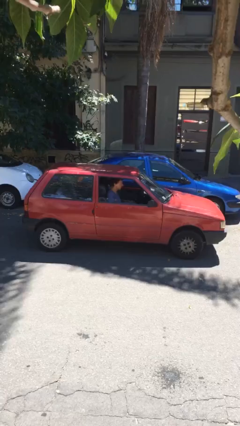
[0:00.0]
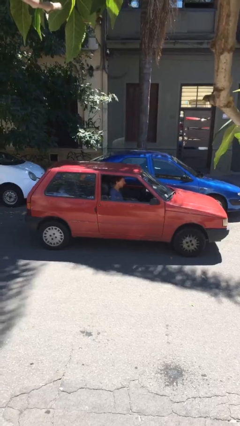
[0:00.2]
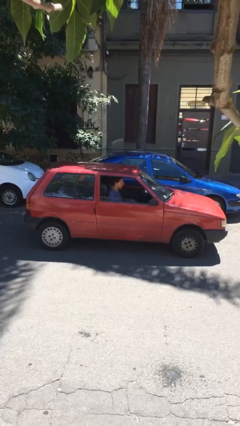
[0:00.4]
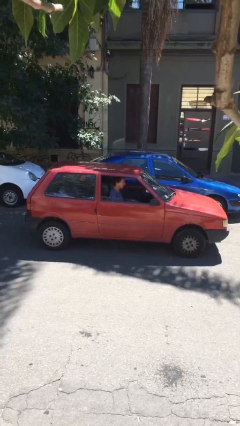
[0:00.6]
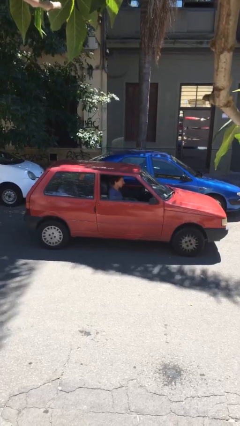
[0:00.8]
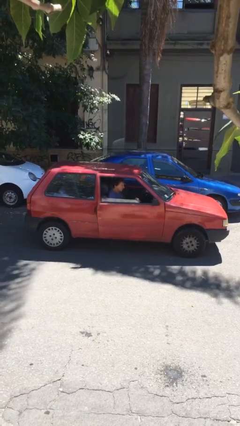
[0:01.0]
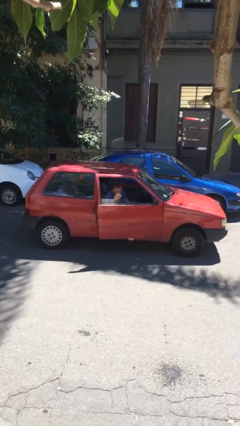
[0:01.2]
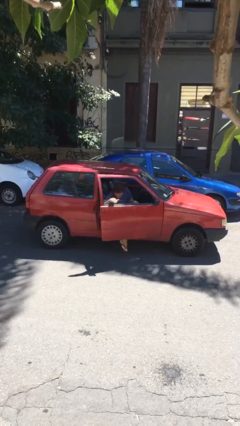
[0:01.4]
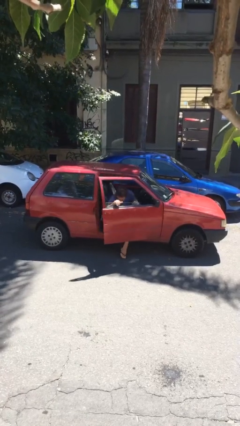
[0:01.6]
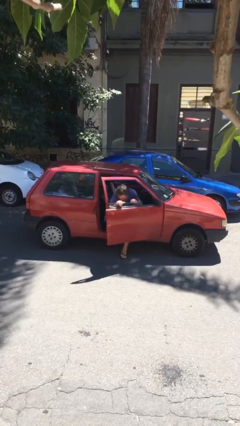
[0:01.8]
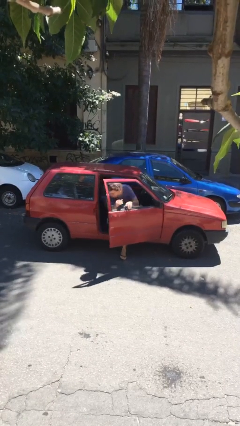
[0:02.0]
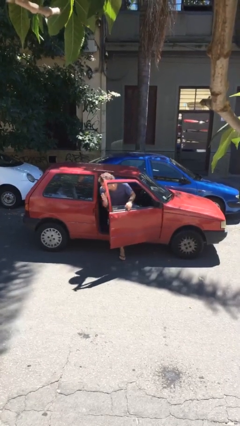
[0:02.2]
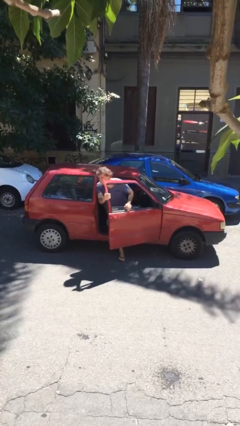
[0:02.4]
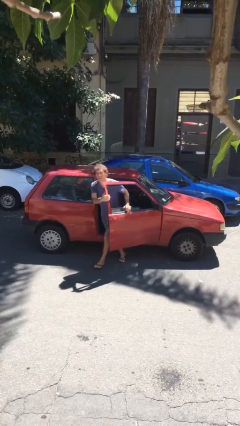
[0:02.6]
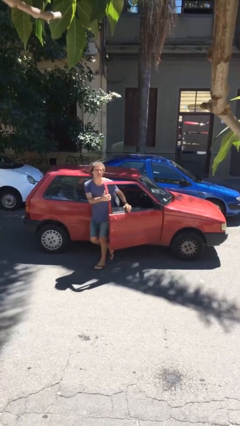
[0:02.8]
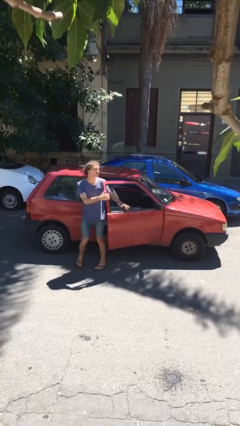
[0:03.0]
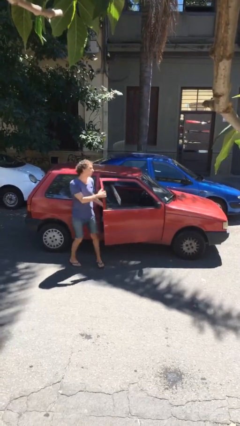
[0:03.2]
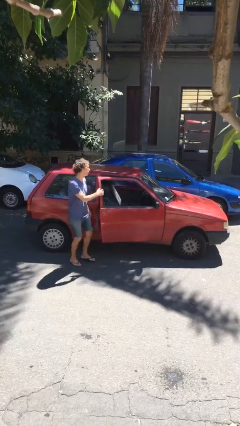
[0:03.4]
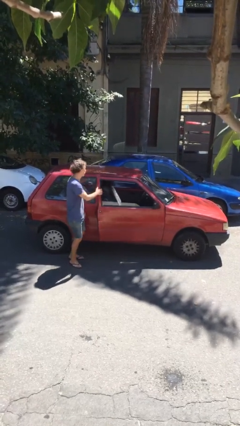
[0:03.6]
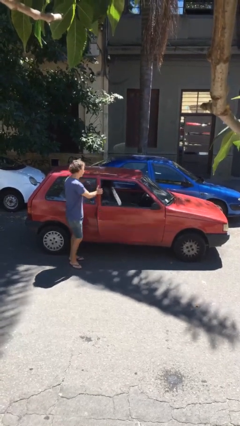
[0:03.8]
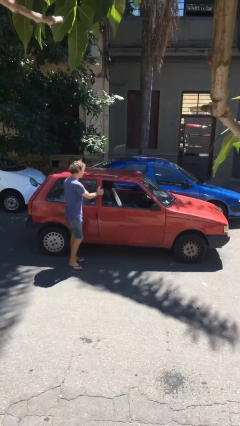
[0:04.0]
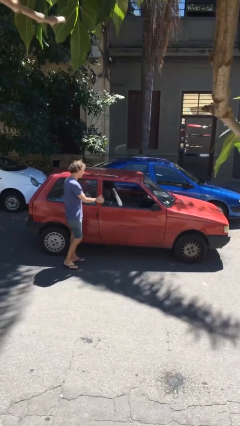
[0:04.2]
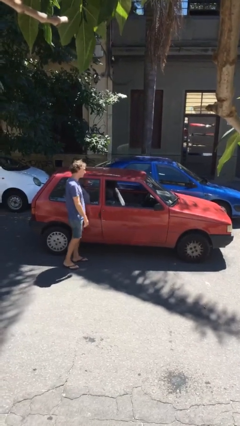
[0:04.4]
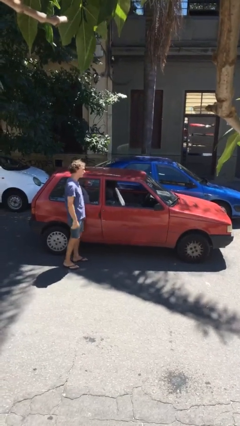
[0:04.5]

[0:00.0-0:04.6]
car drops off person

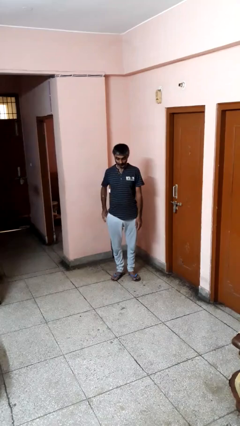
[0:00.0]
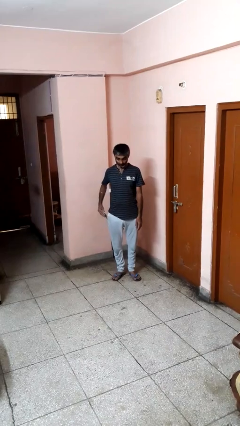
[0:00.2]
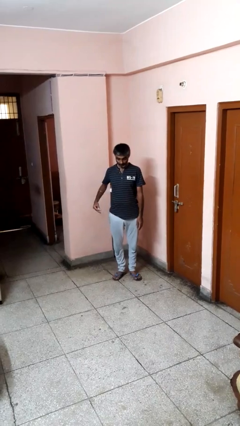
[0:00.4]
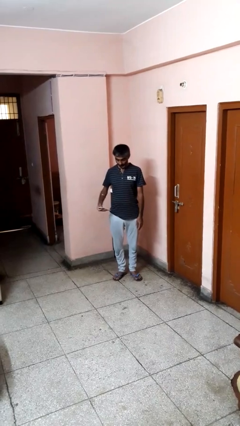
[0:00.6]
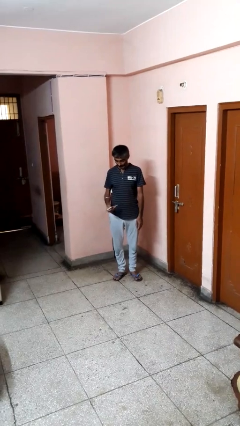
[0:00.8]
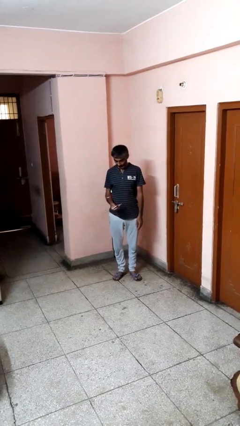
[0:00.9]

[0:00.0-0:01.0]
person takes phone from pocket

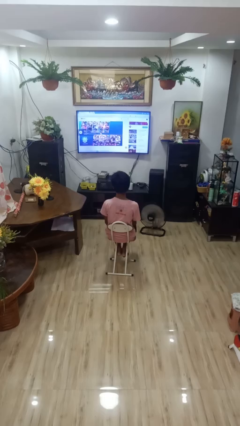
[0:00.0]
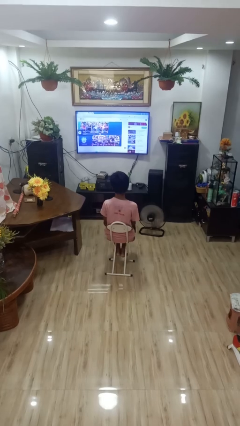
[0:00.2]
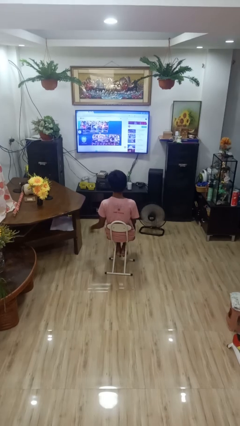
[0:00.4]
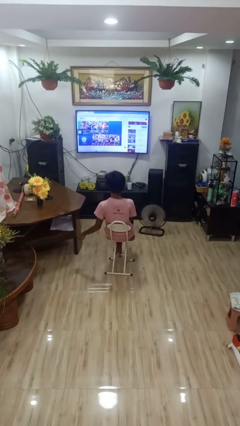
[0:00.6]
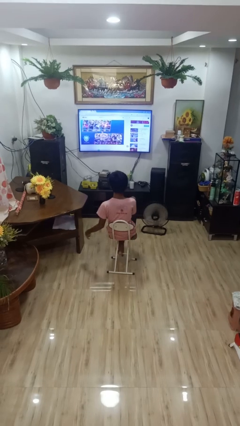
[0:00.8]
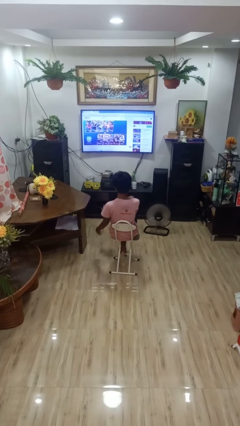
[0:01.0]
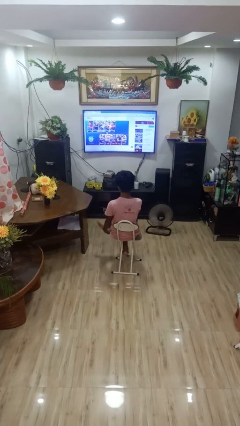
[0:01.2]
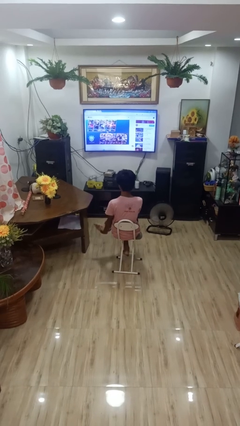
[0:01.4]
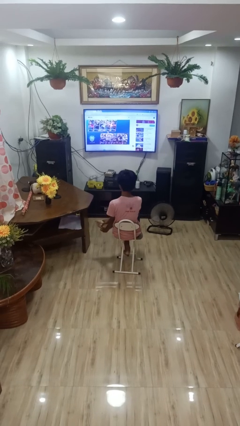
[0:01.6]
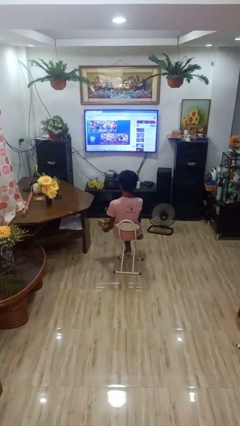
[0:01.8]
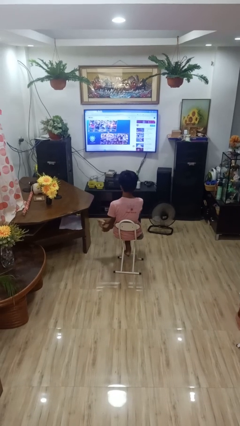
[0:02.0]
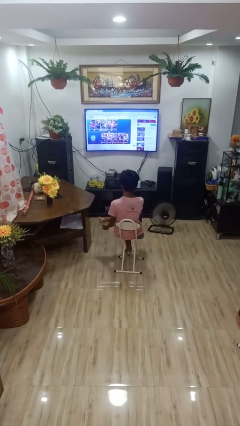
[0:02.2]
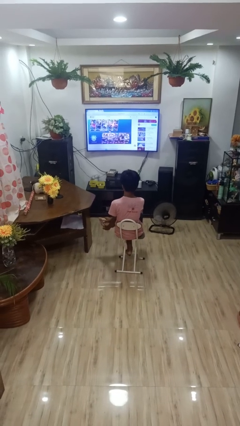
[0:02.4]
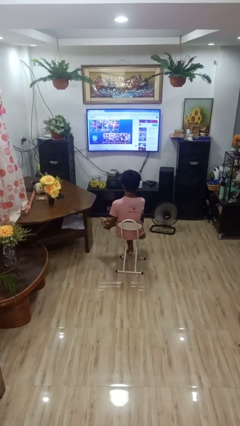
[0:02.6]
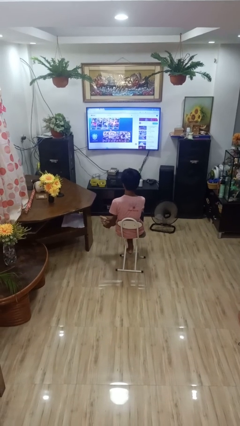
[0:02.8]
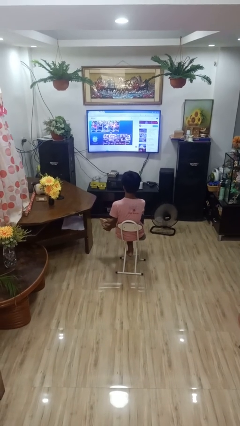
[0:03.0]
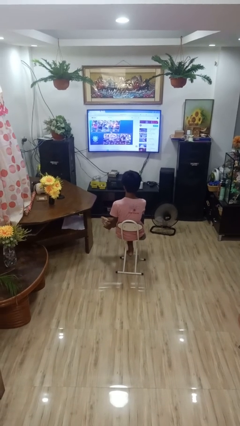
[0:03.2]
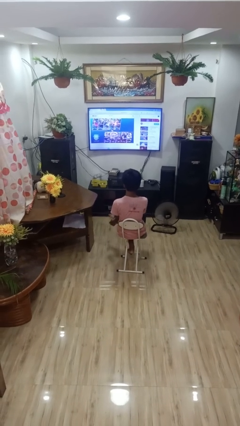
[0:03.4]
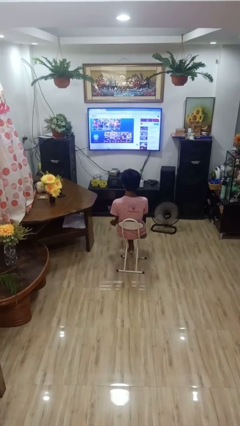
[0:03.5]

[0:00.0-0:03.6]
person rubs foot

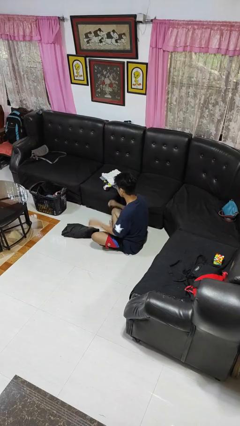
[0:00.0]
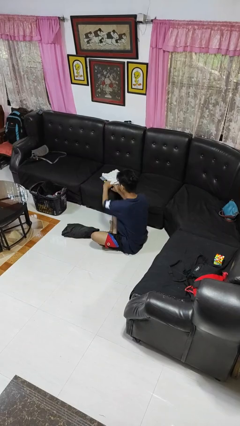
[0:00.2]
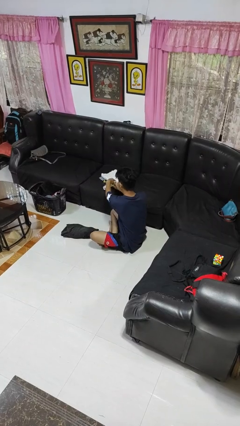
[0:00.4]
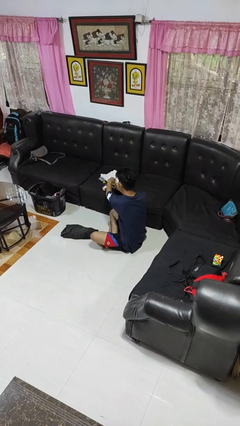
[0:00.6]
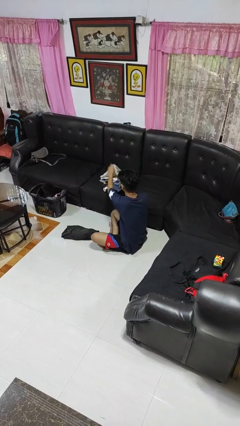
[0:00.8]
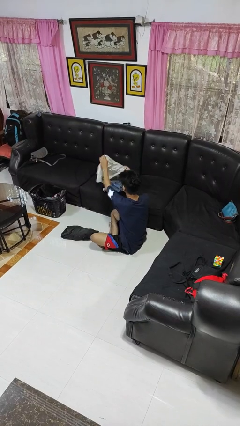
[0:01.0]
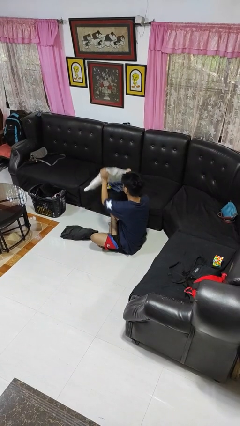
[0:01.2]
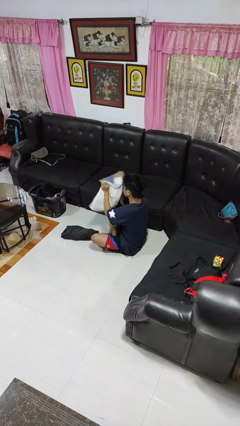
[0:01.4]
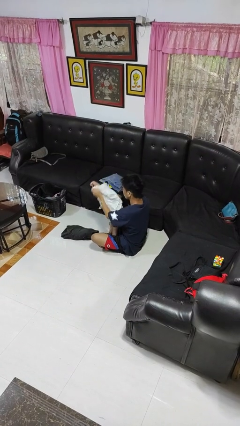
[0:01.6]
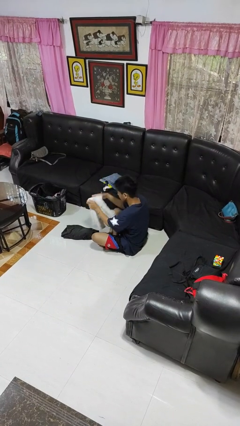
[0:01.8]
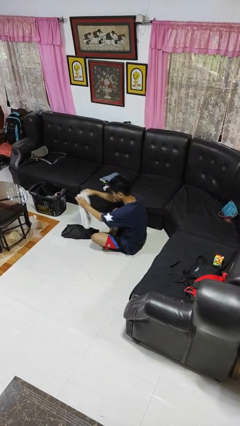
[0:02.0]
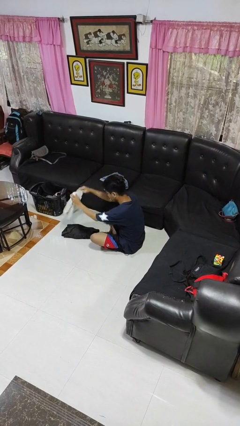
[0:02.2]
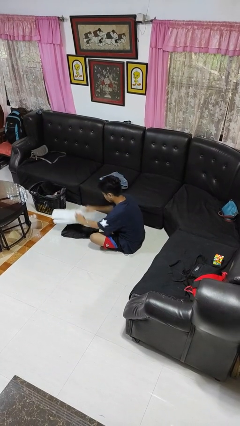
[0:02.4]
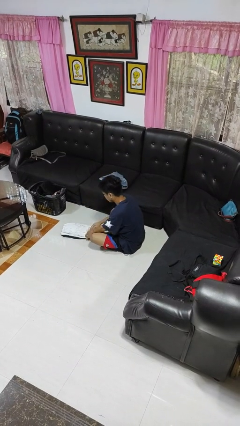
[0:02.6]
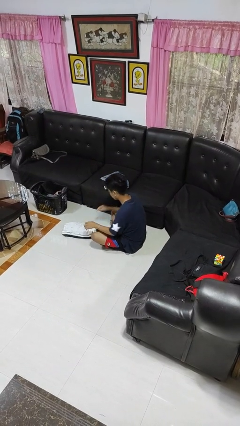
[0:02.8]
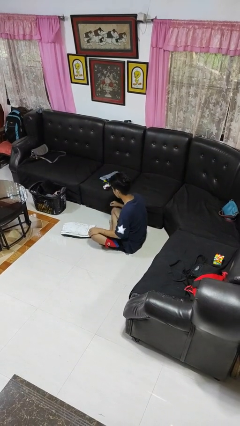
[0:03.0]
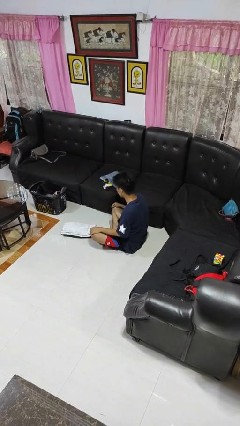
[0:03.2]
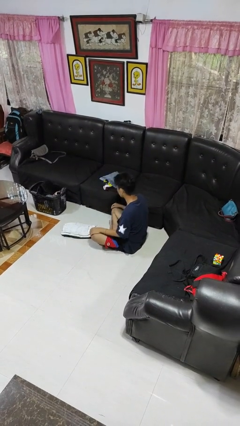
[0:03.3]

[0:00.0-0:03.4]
person folds pants

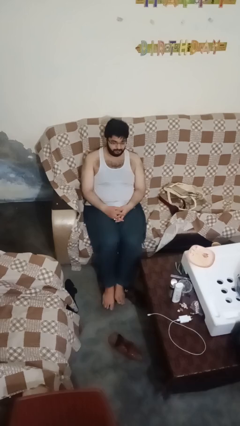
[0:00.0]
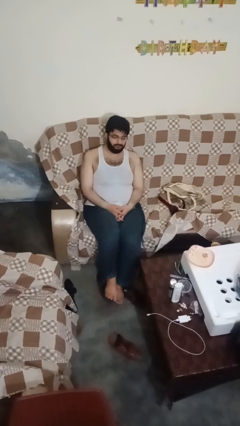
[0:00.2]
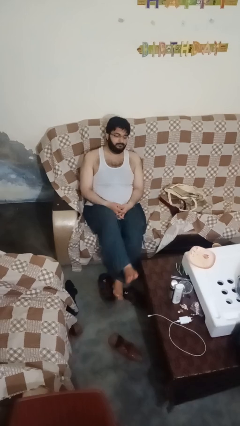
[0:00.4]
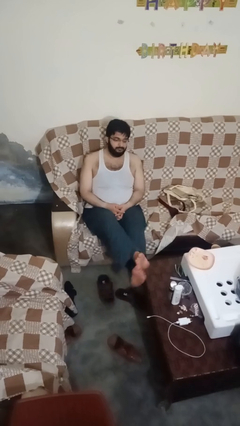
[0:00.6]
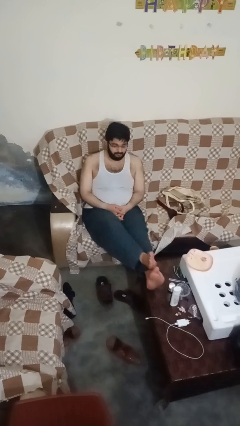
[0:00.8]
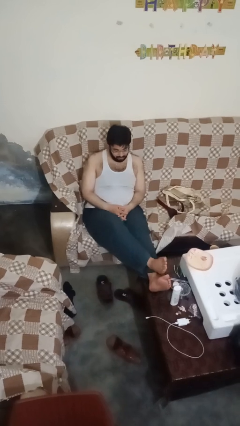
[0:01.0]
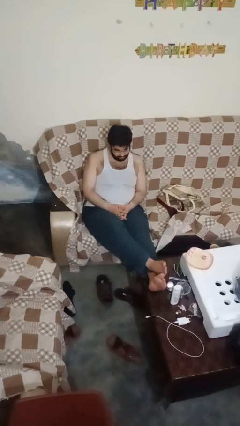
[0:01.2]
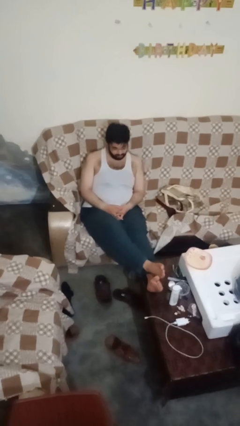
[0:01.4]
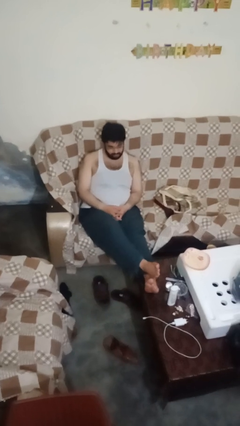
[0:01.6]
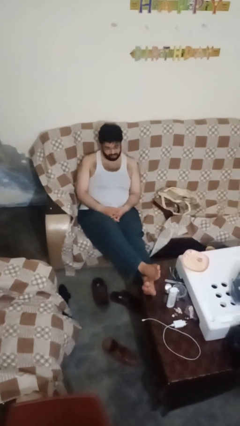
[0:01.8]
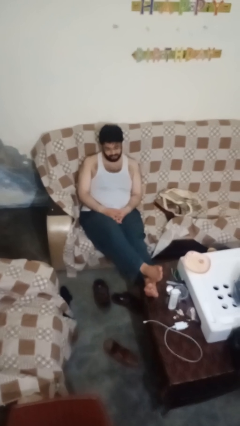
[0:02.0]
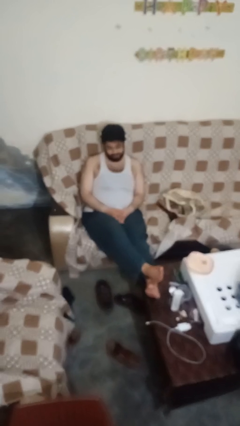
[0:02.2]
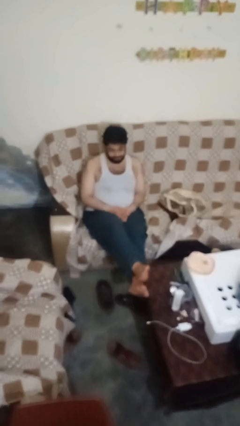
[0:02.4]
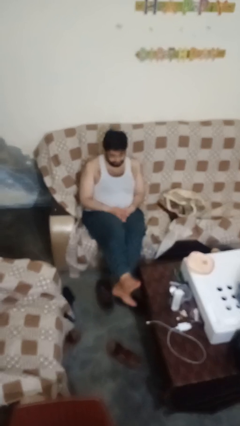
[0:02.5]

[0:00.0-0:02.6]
person puts feet up

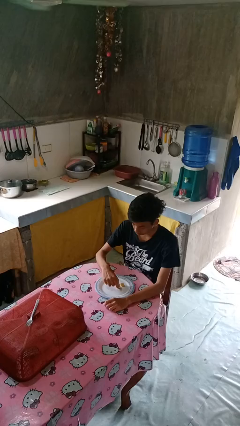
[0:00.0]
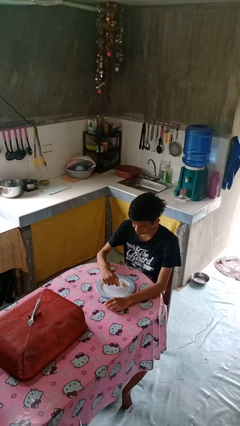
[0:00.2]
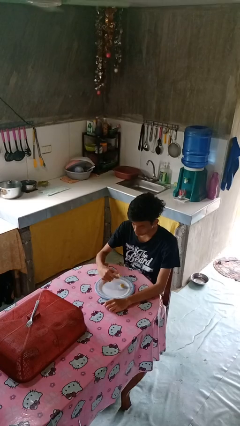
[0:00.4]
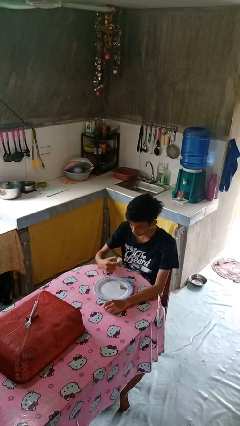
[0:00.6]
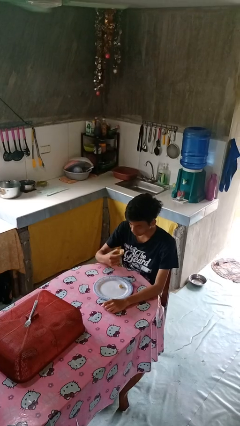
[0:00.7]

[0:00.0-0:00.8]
person eats with hands

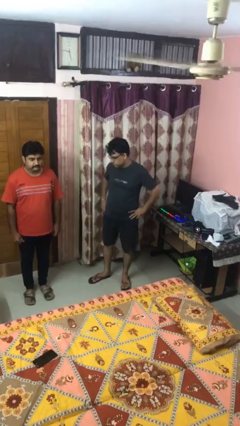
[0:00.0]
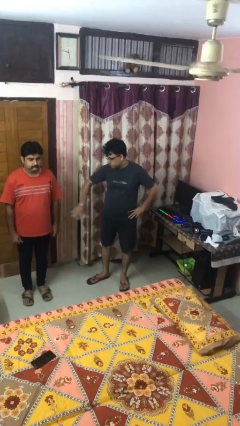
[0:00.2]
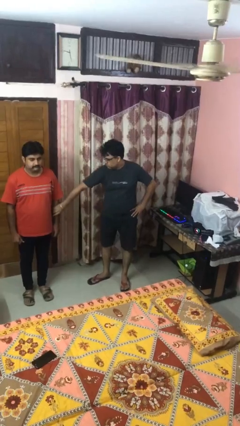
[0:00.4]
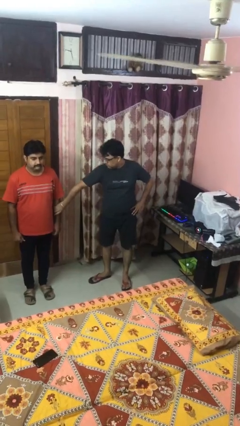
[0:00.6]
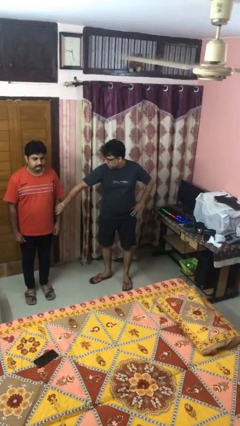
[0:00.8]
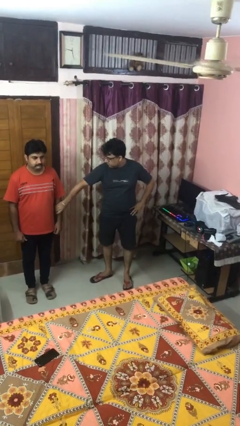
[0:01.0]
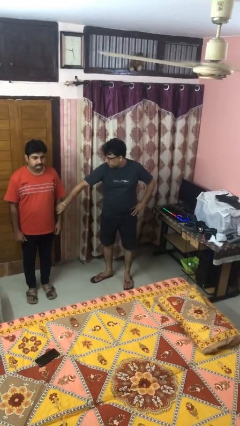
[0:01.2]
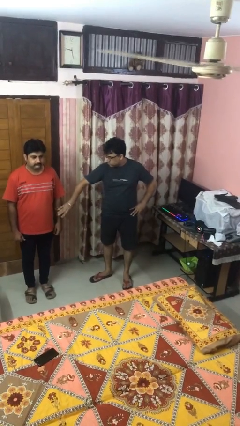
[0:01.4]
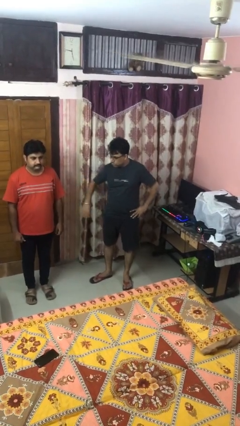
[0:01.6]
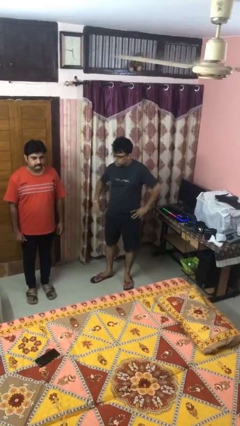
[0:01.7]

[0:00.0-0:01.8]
person grabs person by forearm
